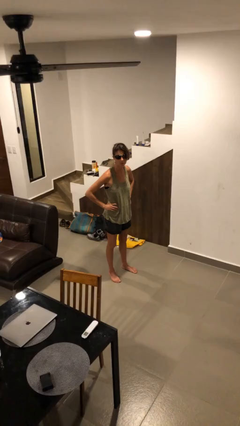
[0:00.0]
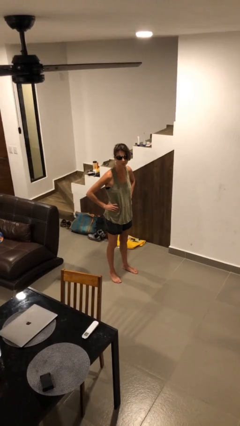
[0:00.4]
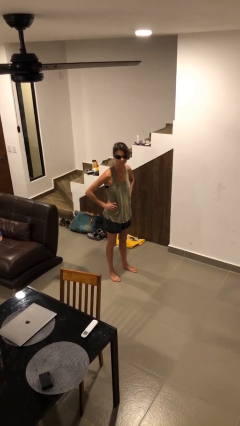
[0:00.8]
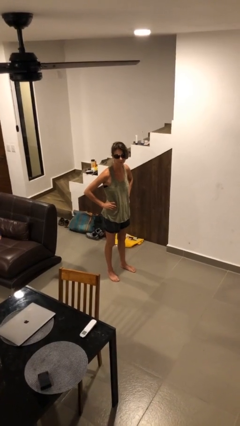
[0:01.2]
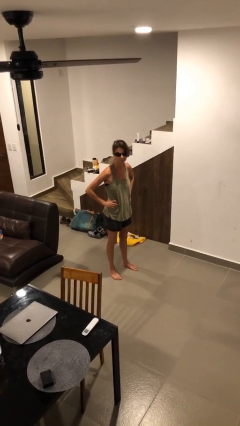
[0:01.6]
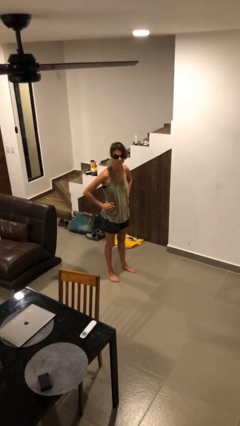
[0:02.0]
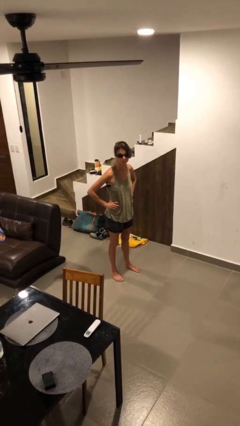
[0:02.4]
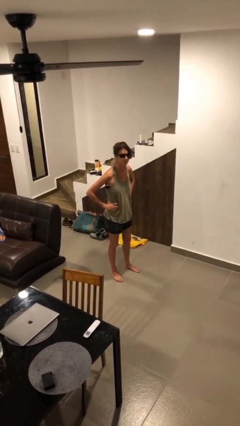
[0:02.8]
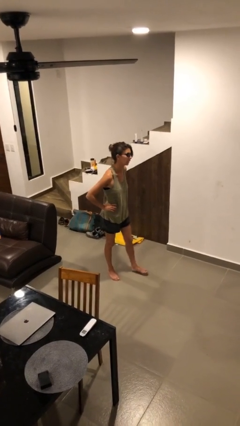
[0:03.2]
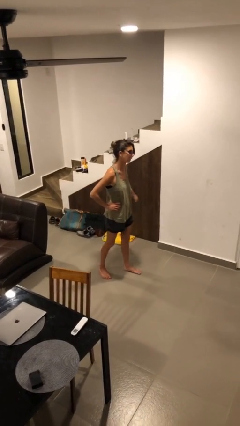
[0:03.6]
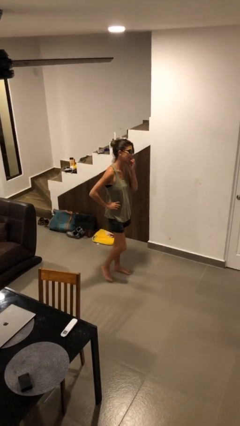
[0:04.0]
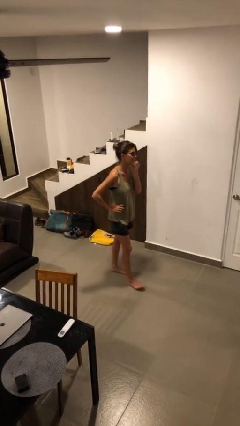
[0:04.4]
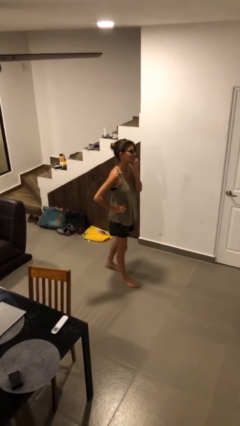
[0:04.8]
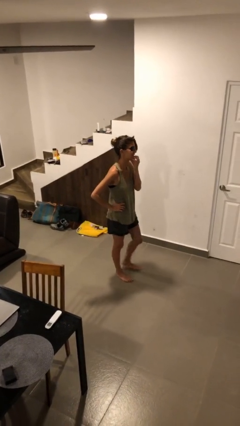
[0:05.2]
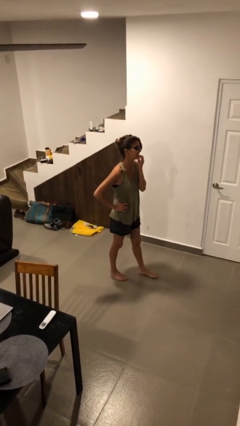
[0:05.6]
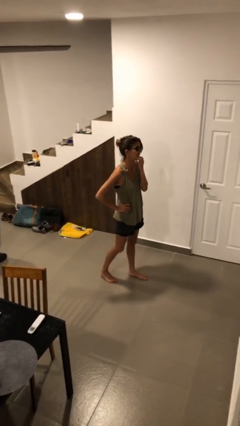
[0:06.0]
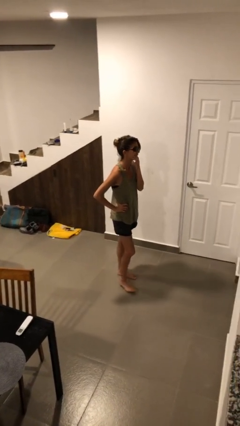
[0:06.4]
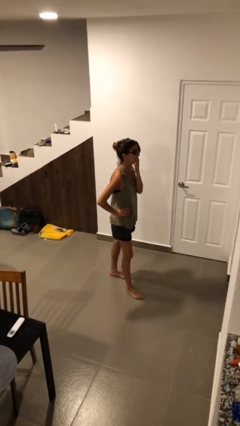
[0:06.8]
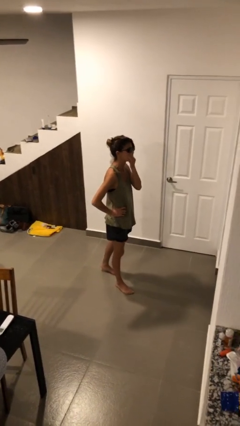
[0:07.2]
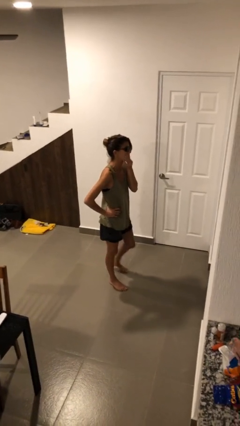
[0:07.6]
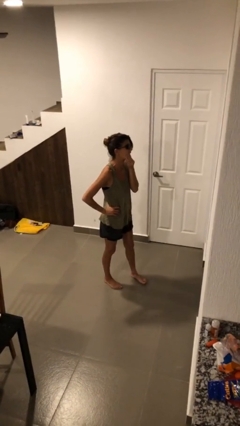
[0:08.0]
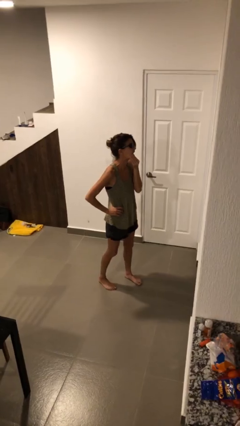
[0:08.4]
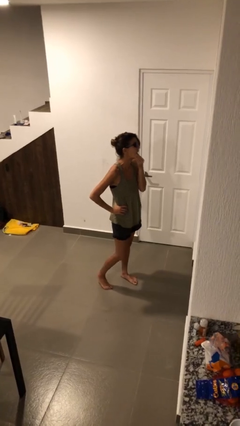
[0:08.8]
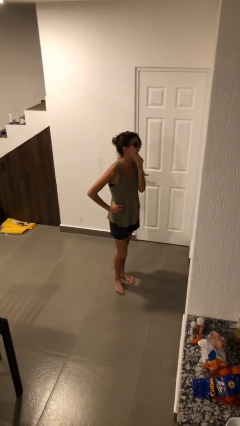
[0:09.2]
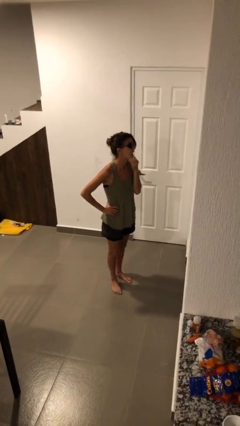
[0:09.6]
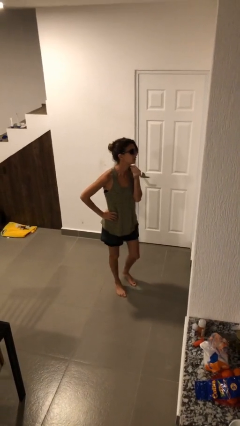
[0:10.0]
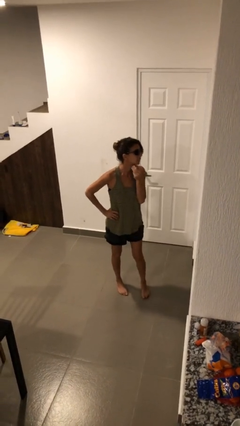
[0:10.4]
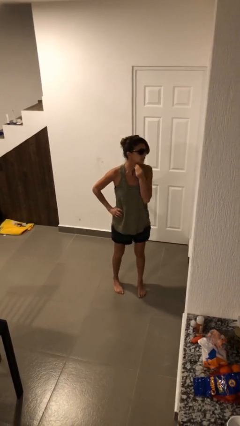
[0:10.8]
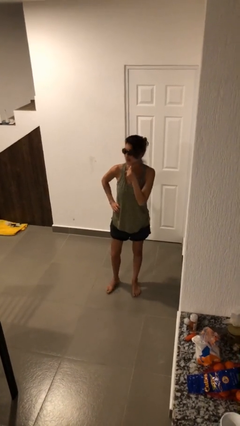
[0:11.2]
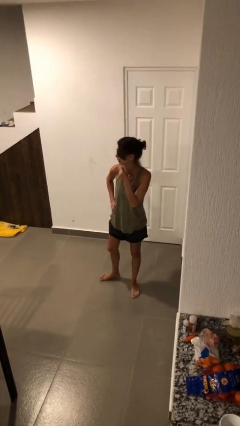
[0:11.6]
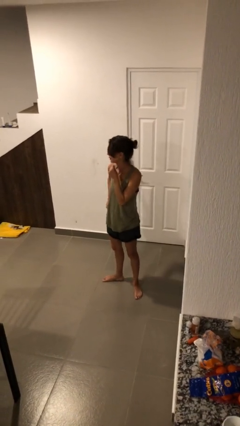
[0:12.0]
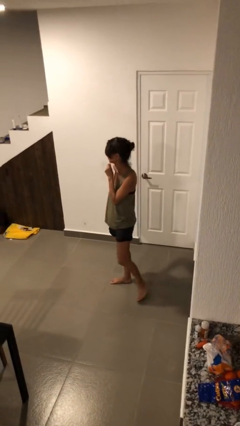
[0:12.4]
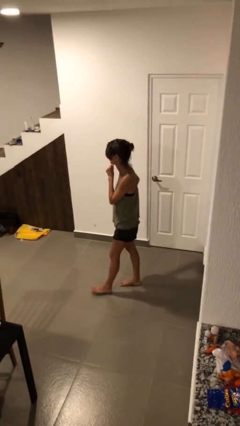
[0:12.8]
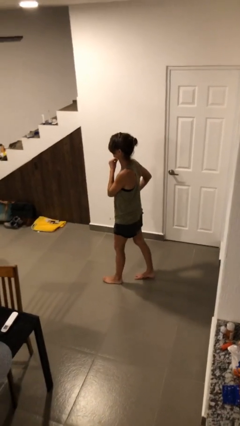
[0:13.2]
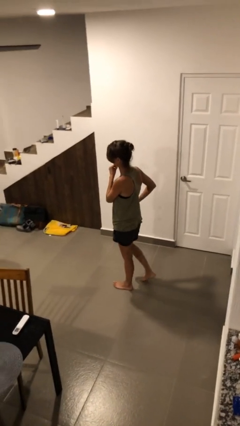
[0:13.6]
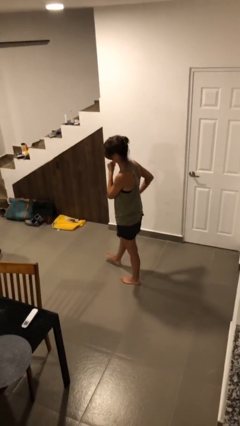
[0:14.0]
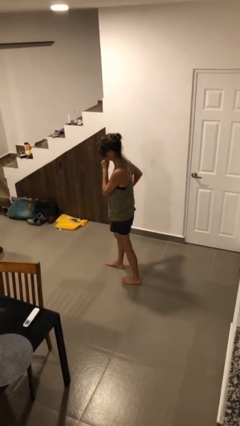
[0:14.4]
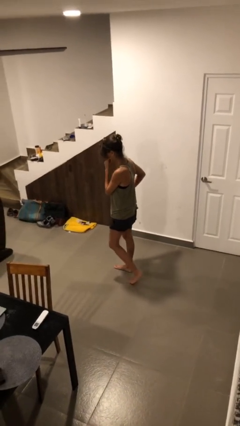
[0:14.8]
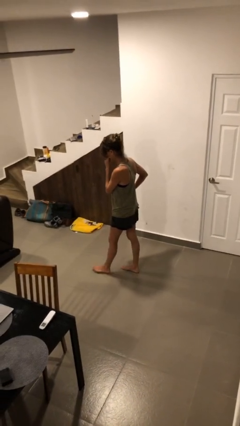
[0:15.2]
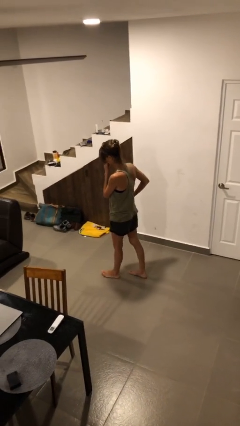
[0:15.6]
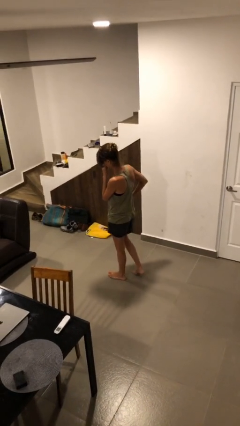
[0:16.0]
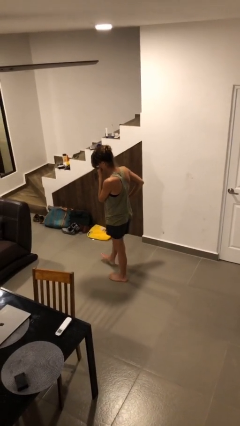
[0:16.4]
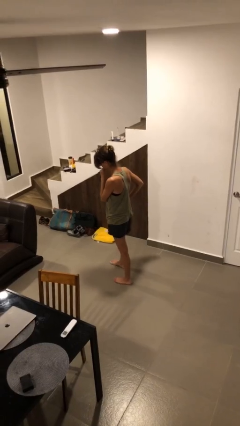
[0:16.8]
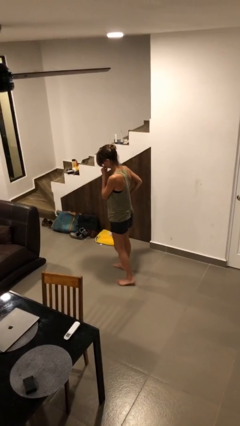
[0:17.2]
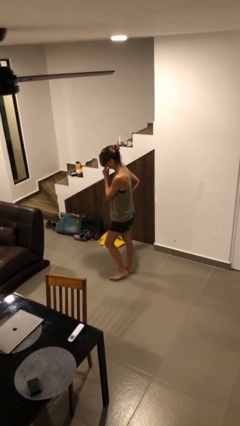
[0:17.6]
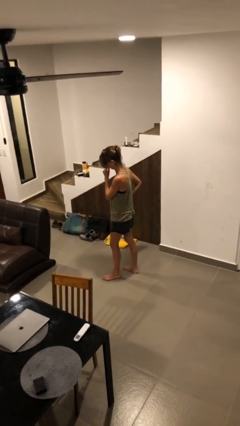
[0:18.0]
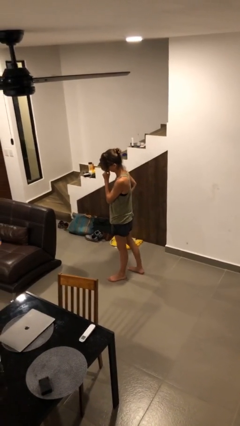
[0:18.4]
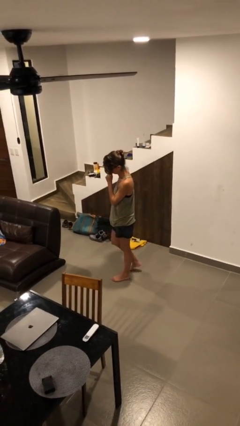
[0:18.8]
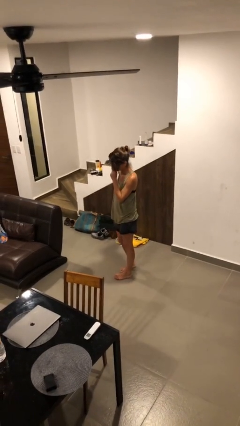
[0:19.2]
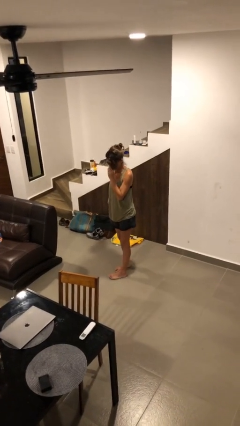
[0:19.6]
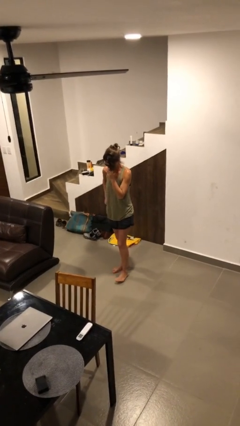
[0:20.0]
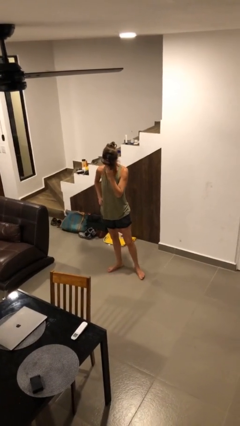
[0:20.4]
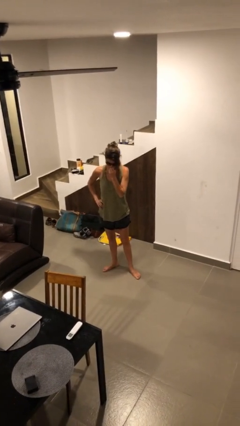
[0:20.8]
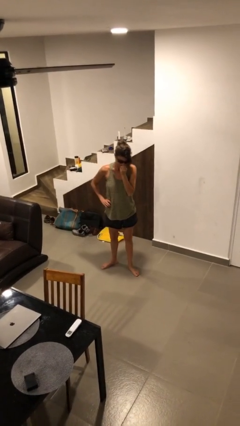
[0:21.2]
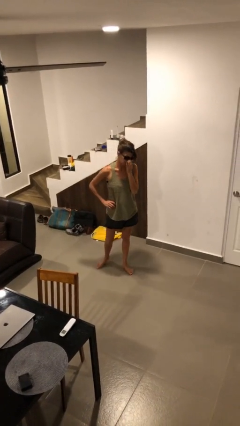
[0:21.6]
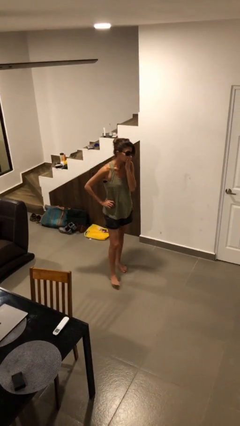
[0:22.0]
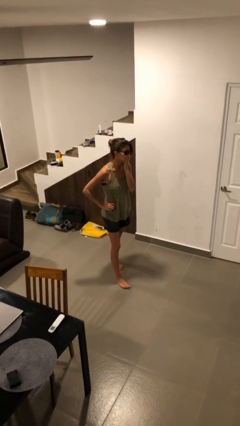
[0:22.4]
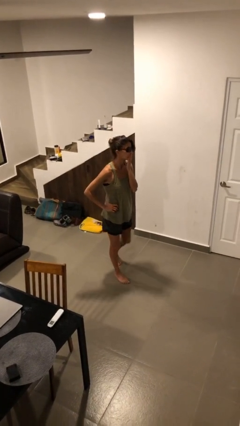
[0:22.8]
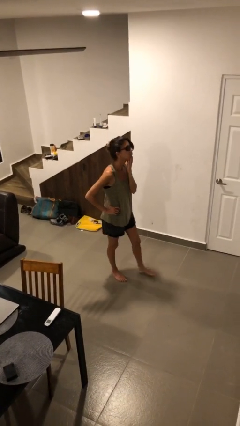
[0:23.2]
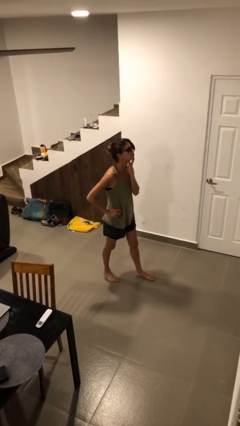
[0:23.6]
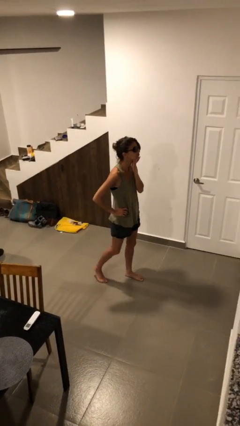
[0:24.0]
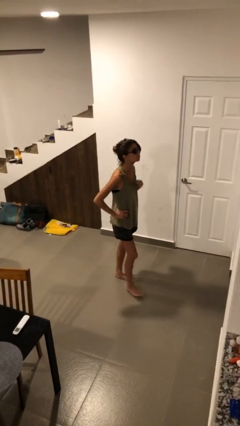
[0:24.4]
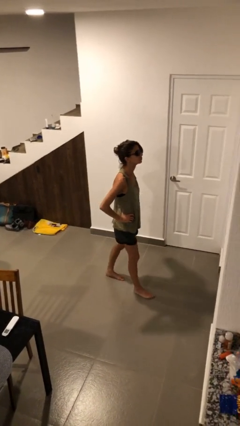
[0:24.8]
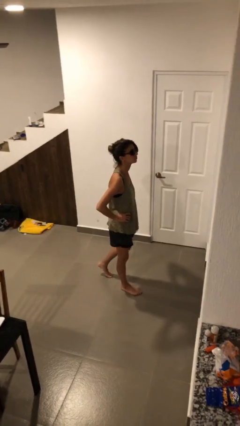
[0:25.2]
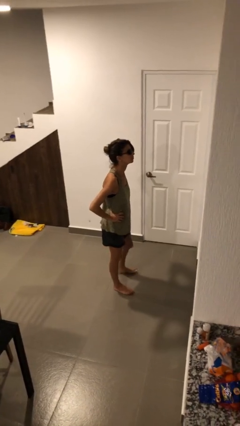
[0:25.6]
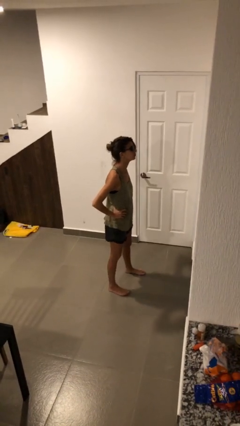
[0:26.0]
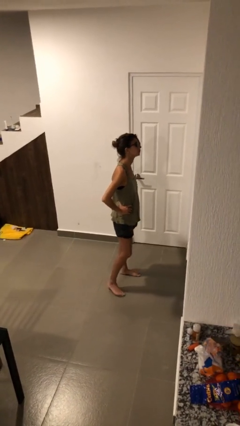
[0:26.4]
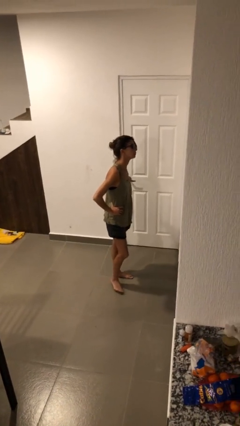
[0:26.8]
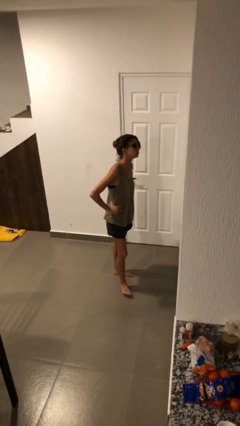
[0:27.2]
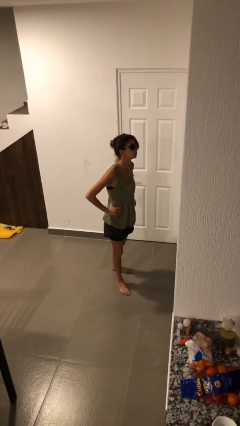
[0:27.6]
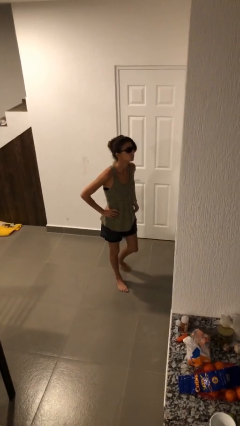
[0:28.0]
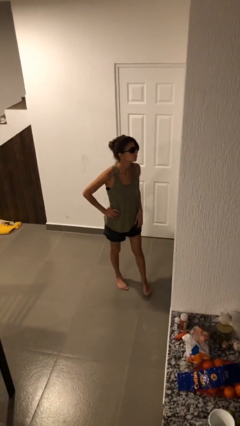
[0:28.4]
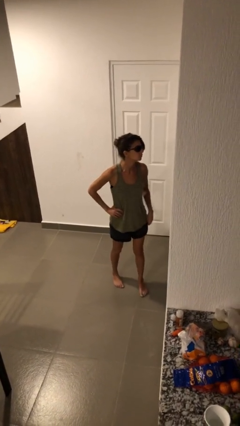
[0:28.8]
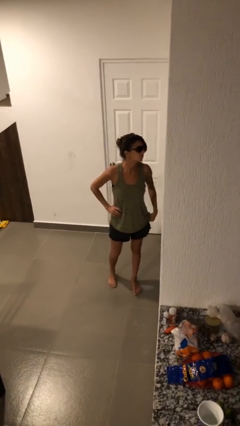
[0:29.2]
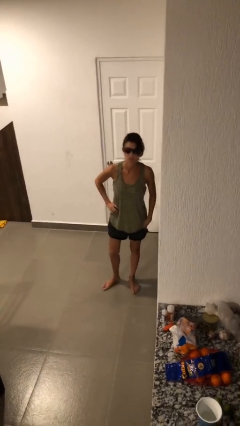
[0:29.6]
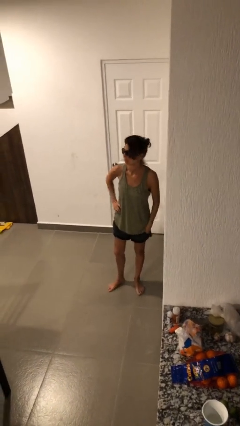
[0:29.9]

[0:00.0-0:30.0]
person walks

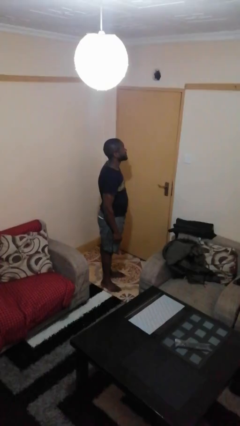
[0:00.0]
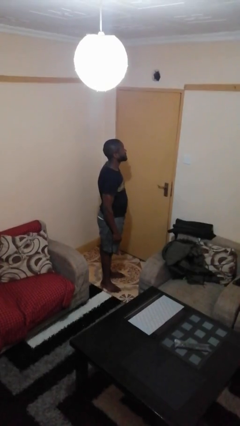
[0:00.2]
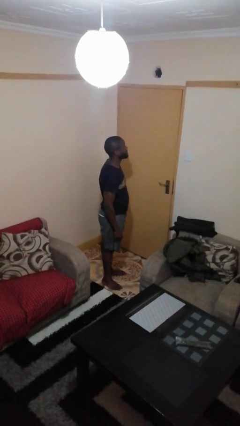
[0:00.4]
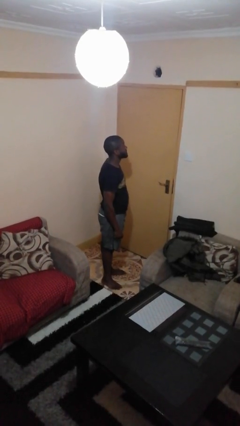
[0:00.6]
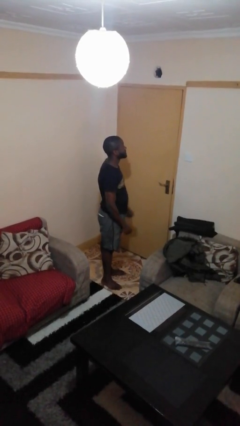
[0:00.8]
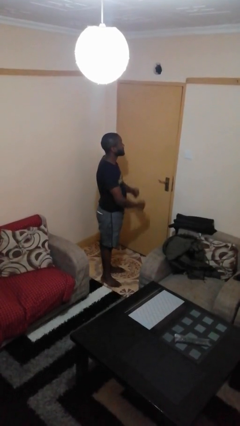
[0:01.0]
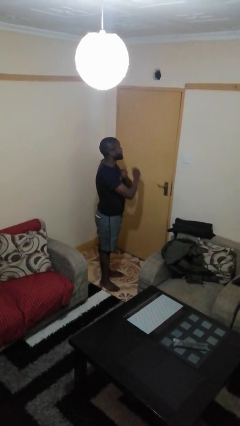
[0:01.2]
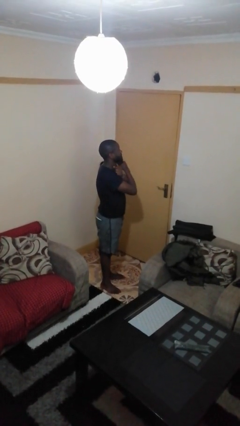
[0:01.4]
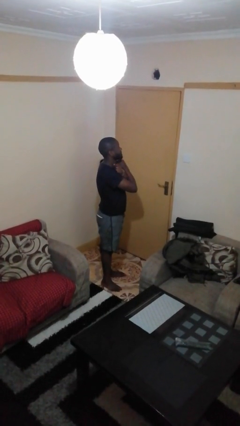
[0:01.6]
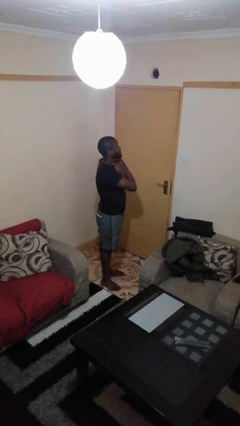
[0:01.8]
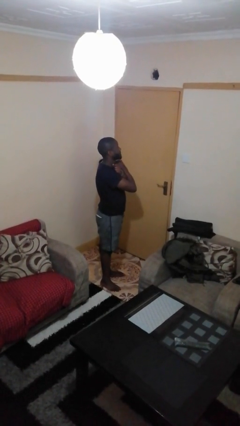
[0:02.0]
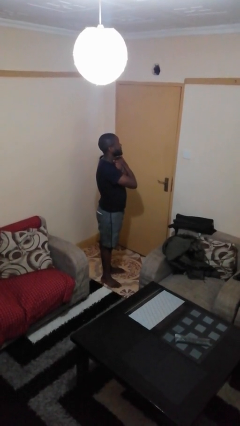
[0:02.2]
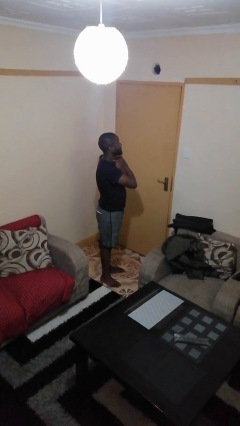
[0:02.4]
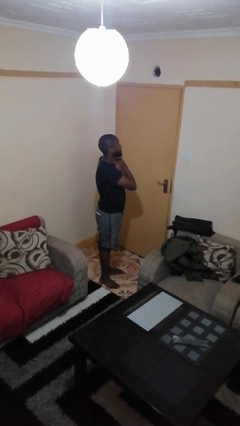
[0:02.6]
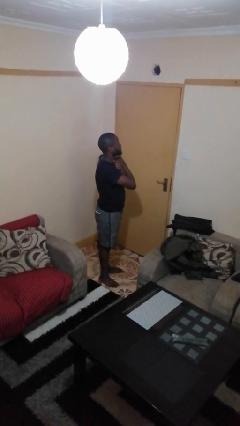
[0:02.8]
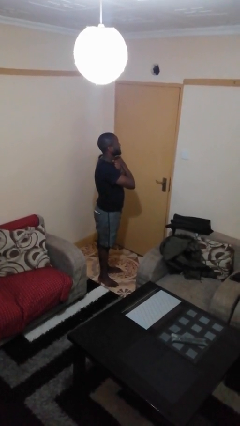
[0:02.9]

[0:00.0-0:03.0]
person gestures arms x
